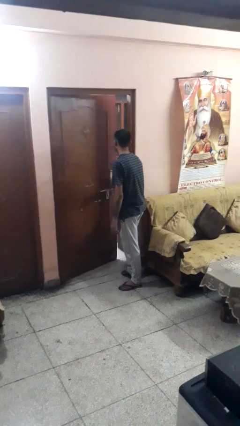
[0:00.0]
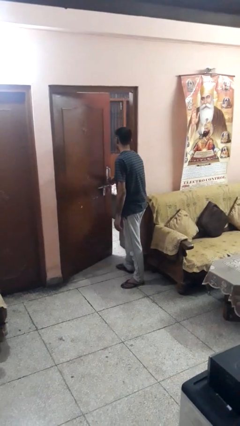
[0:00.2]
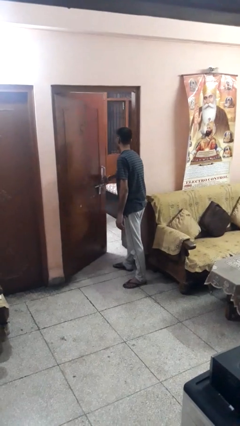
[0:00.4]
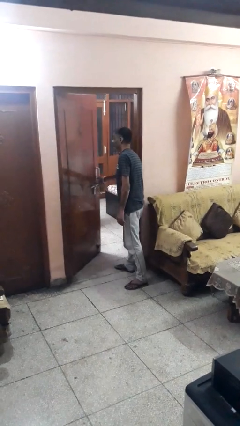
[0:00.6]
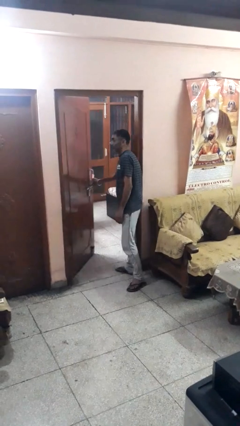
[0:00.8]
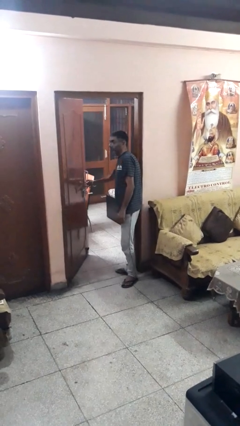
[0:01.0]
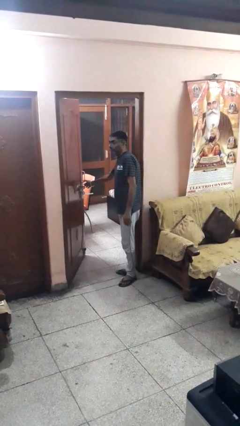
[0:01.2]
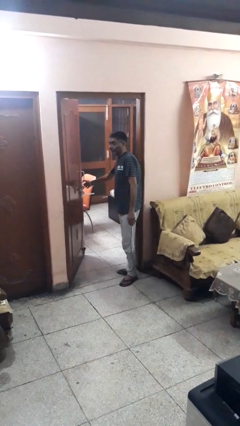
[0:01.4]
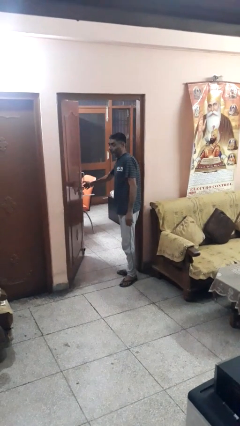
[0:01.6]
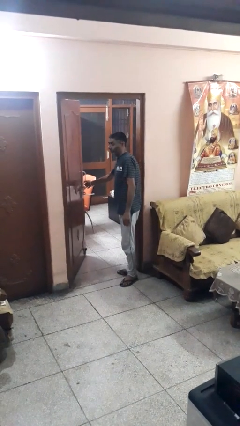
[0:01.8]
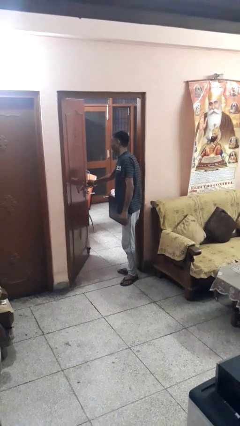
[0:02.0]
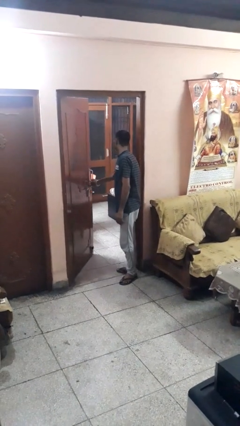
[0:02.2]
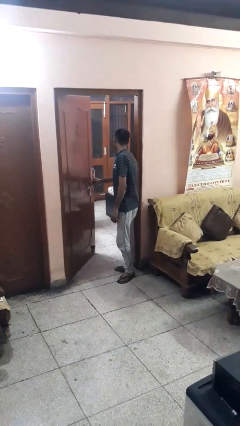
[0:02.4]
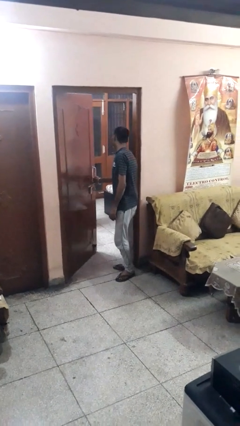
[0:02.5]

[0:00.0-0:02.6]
person opens facility door

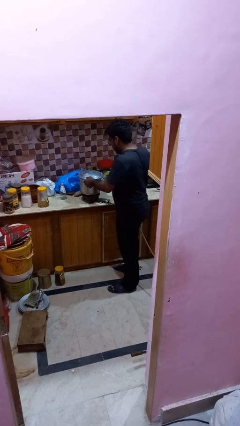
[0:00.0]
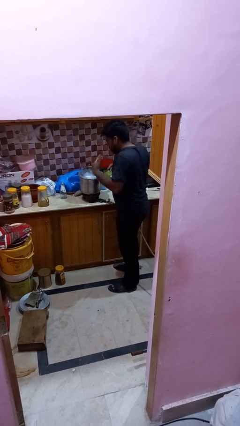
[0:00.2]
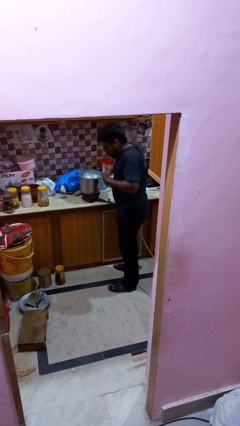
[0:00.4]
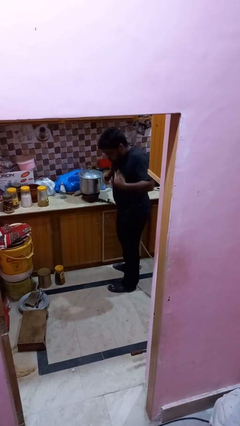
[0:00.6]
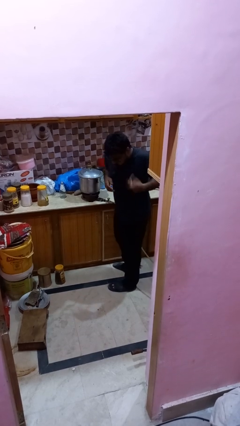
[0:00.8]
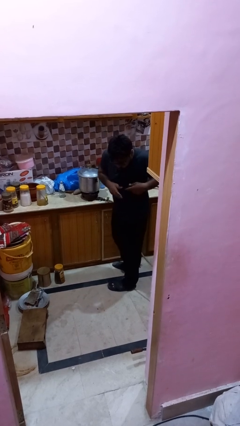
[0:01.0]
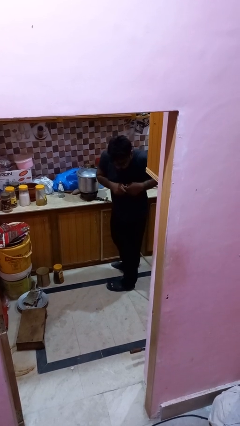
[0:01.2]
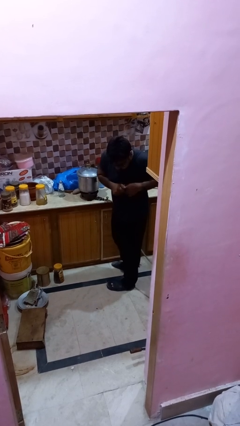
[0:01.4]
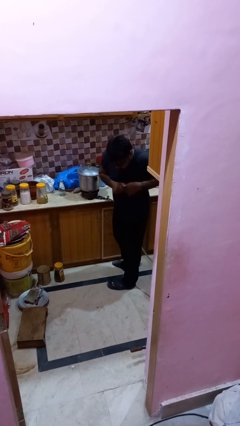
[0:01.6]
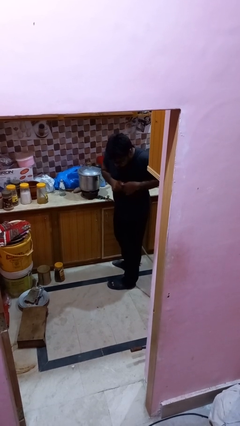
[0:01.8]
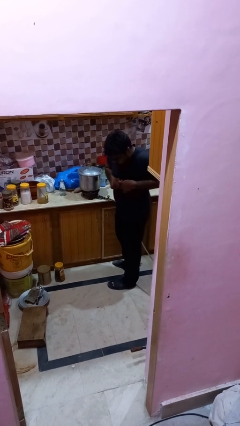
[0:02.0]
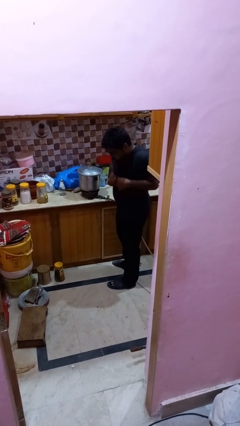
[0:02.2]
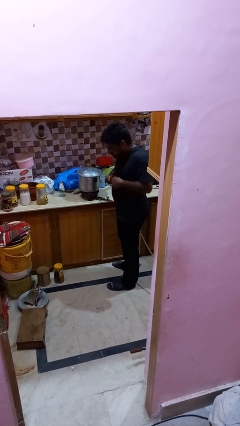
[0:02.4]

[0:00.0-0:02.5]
person burns hand

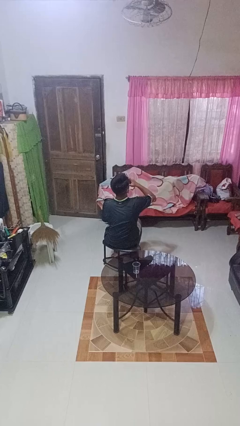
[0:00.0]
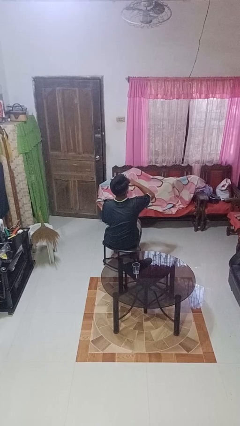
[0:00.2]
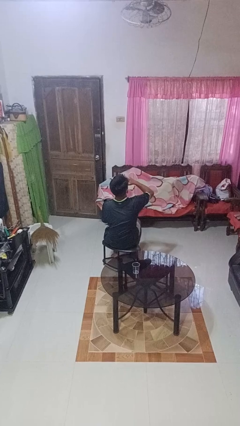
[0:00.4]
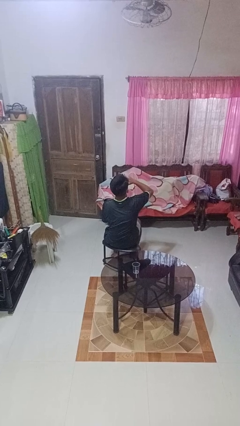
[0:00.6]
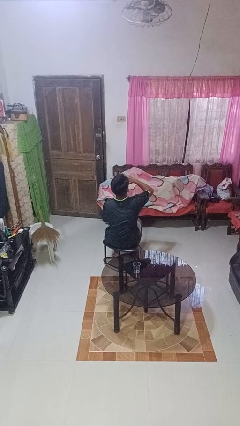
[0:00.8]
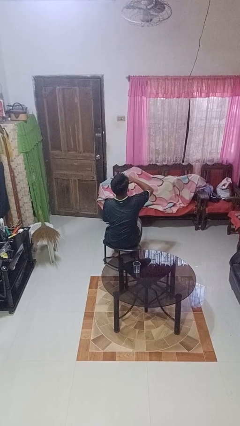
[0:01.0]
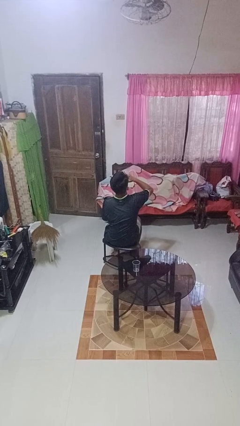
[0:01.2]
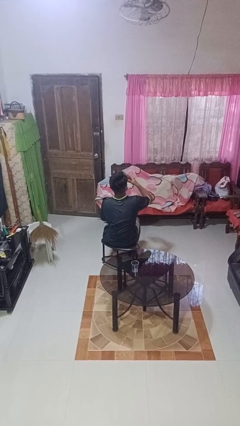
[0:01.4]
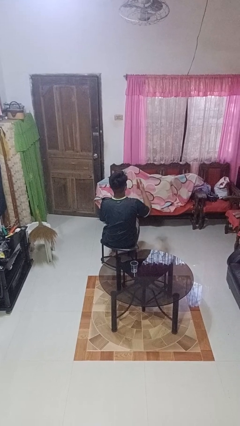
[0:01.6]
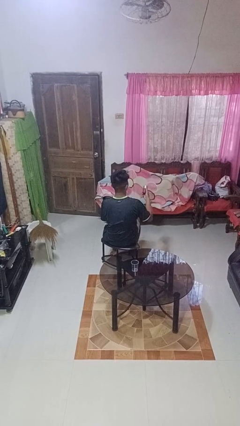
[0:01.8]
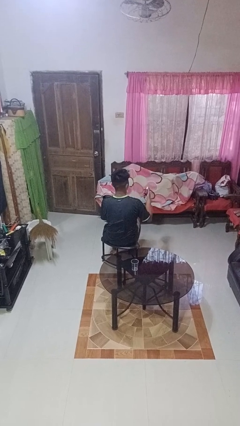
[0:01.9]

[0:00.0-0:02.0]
person drinks from beverage can

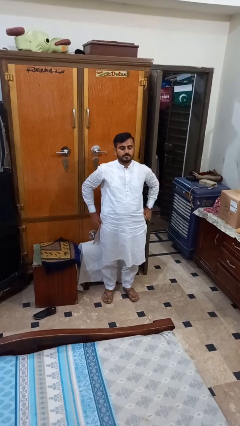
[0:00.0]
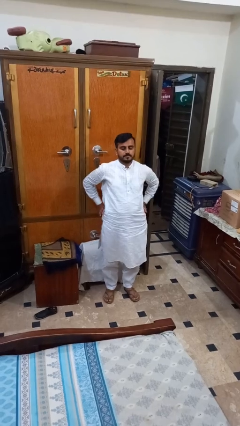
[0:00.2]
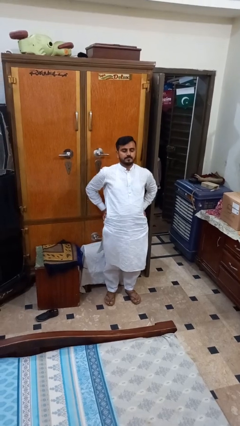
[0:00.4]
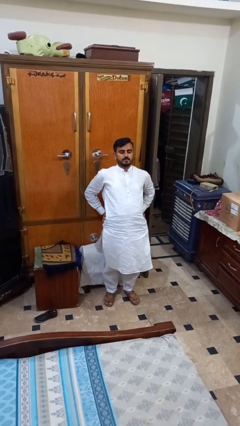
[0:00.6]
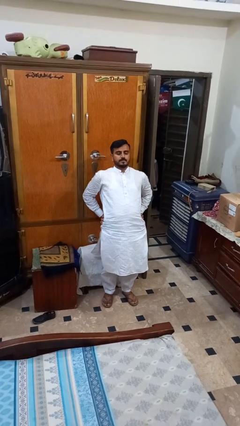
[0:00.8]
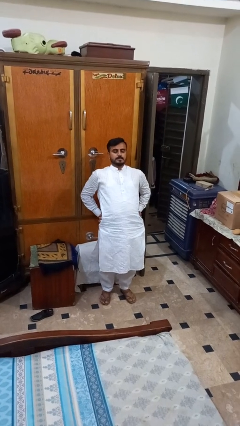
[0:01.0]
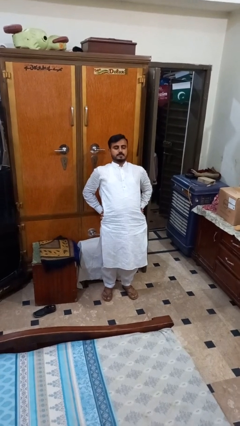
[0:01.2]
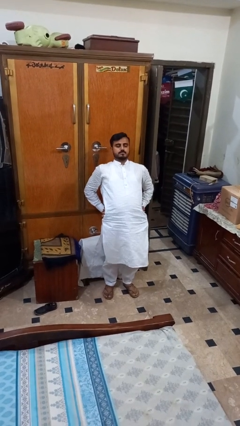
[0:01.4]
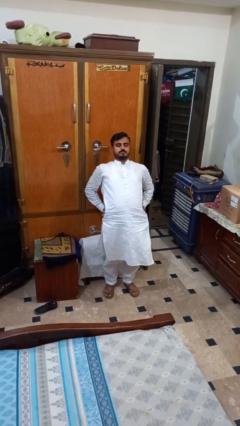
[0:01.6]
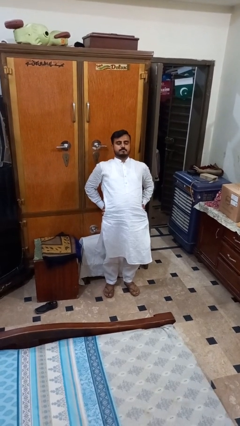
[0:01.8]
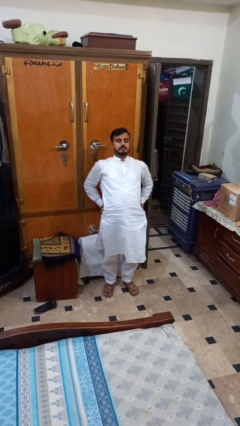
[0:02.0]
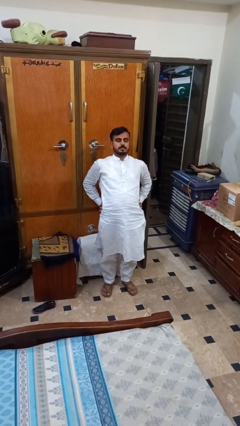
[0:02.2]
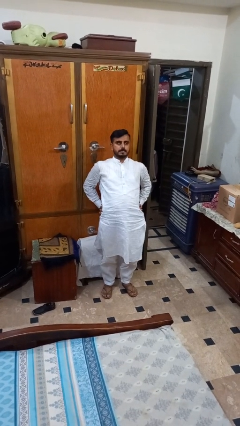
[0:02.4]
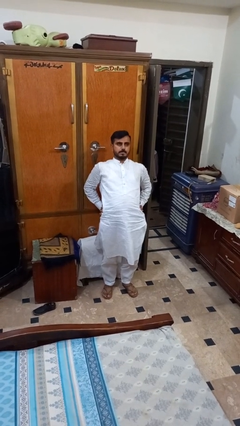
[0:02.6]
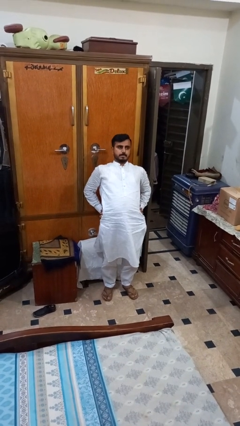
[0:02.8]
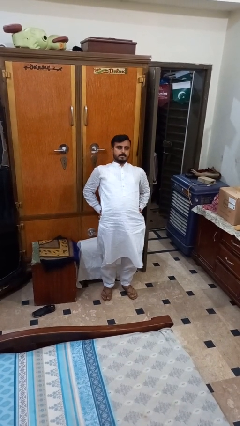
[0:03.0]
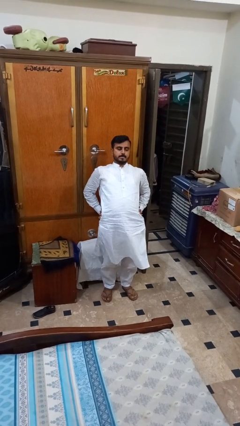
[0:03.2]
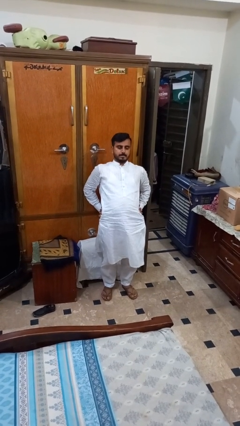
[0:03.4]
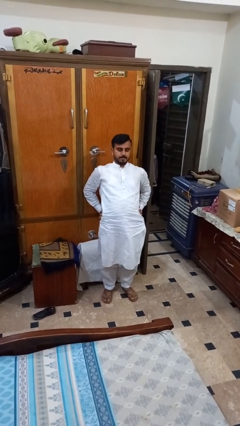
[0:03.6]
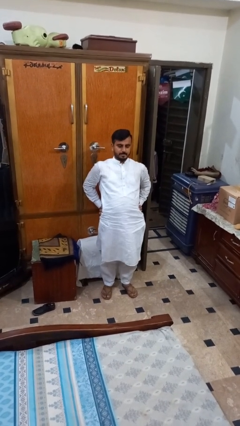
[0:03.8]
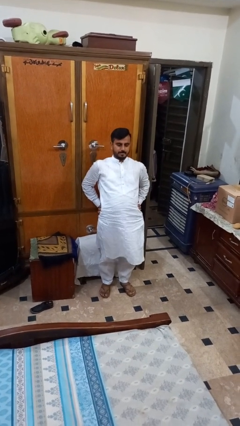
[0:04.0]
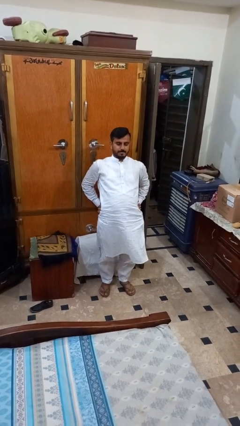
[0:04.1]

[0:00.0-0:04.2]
person stretches back

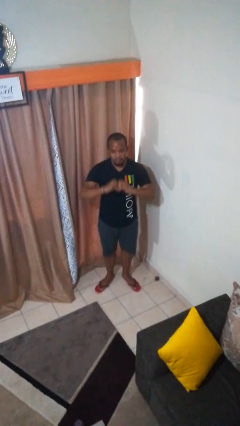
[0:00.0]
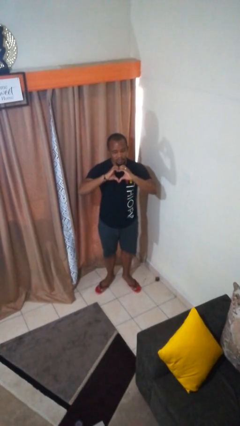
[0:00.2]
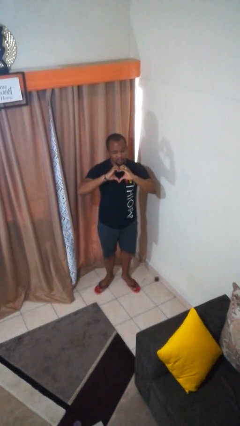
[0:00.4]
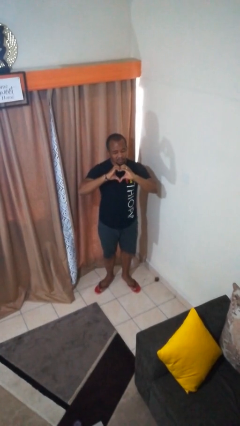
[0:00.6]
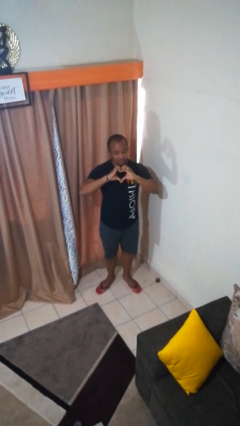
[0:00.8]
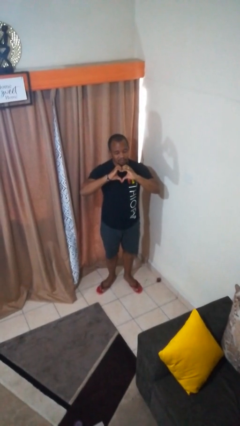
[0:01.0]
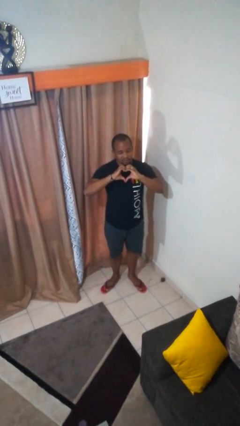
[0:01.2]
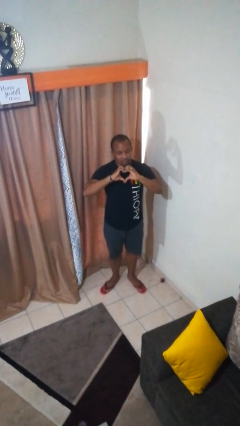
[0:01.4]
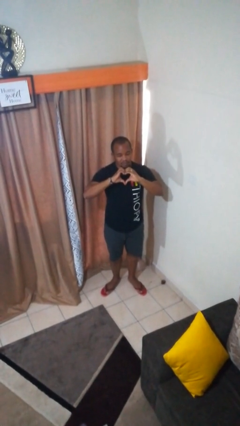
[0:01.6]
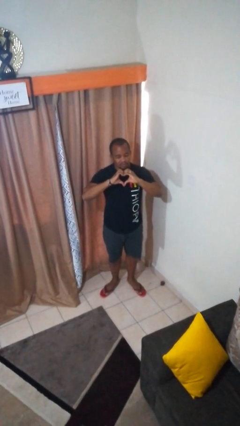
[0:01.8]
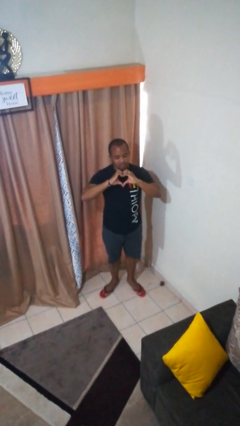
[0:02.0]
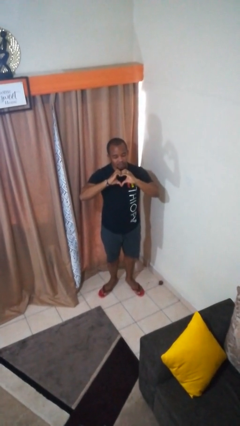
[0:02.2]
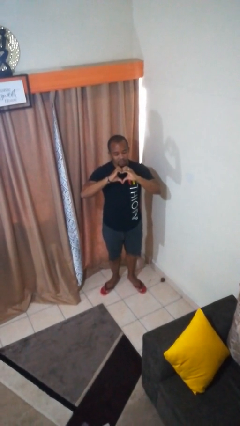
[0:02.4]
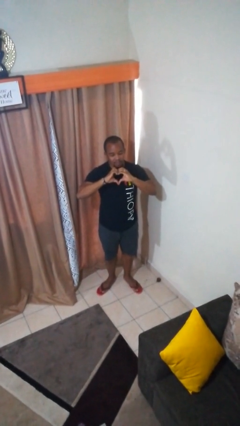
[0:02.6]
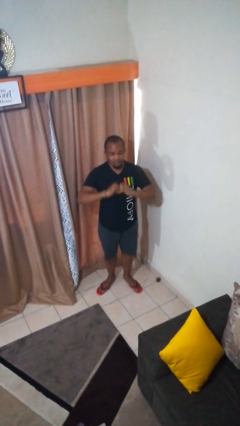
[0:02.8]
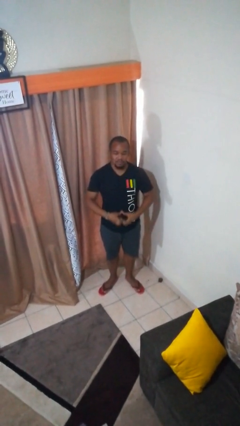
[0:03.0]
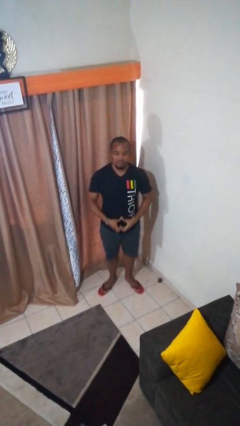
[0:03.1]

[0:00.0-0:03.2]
person gestures heart

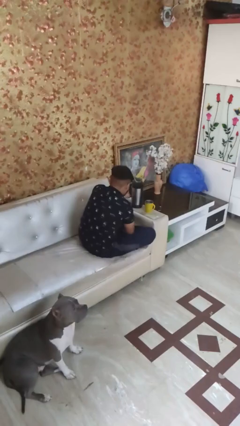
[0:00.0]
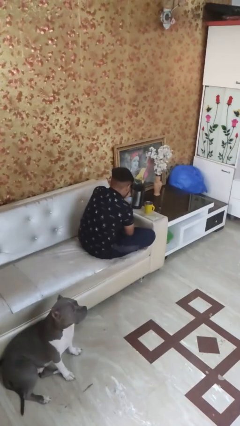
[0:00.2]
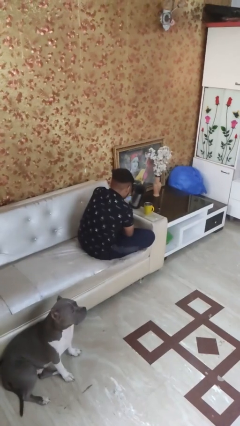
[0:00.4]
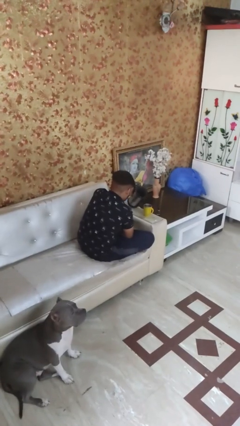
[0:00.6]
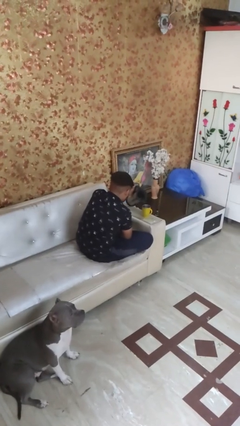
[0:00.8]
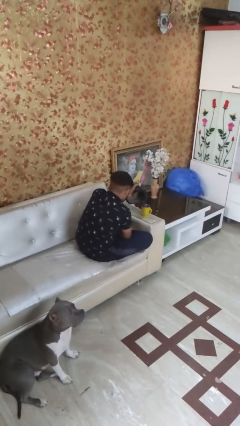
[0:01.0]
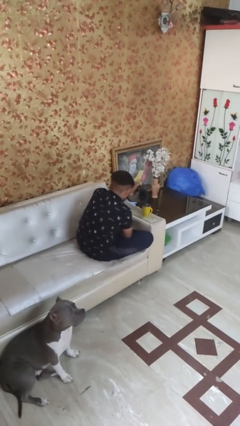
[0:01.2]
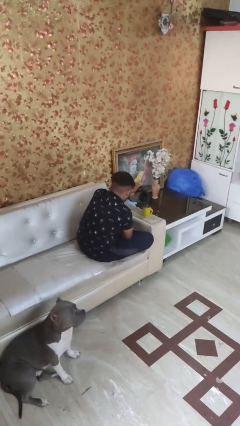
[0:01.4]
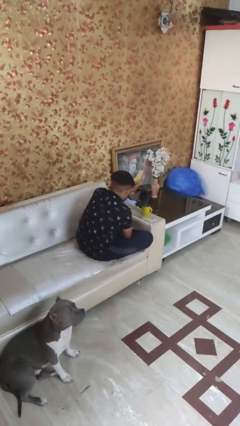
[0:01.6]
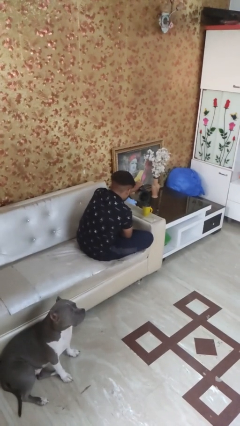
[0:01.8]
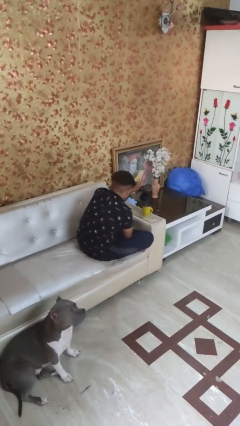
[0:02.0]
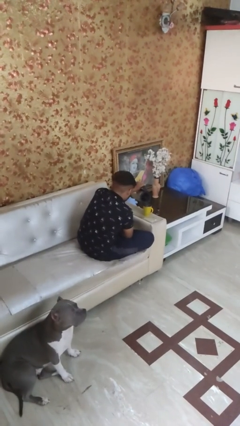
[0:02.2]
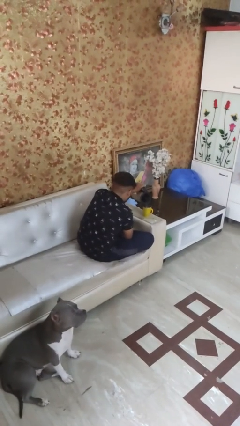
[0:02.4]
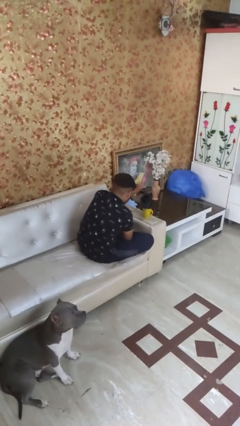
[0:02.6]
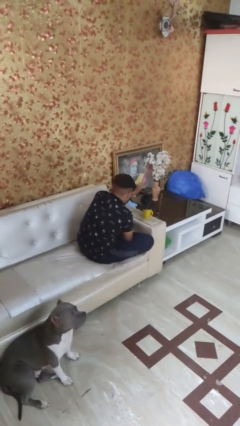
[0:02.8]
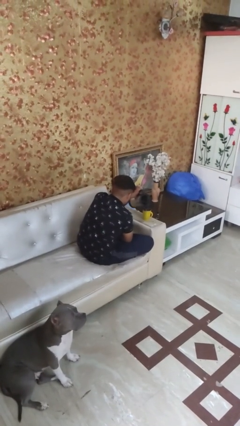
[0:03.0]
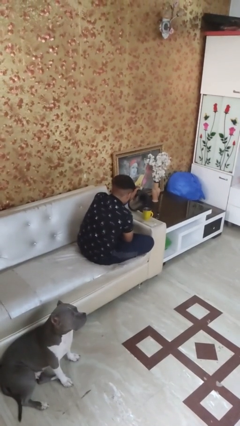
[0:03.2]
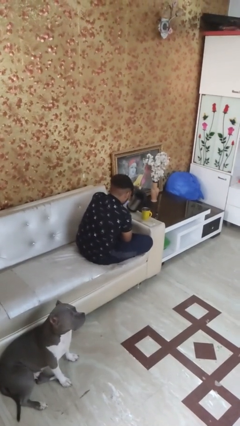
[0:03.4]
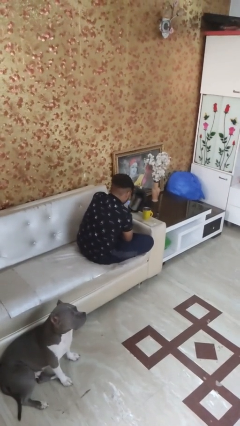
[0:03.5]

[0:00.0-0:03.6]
person pours coffee into mug
